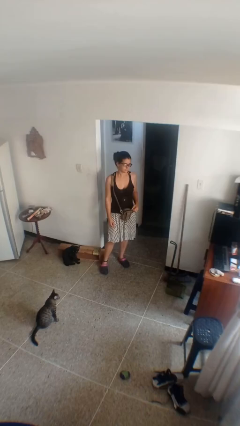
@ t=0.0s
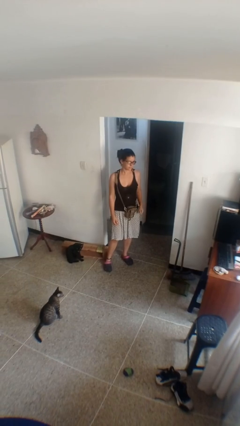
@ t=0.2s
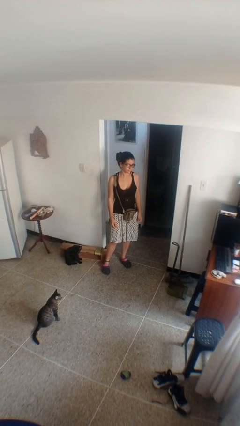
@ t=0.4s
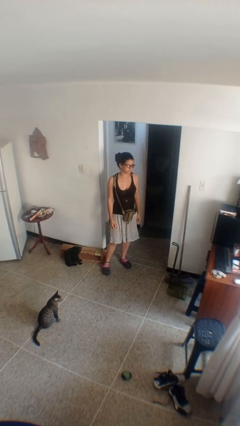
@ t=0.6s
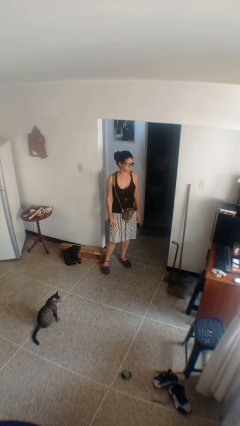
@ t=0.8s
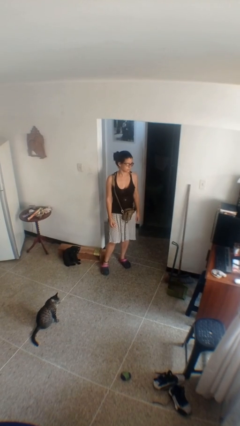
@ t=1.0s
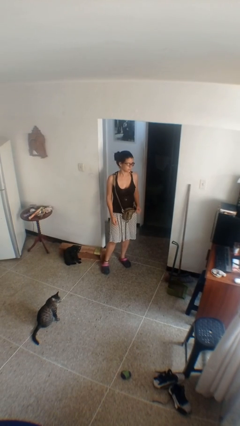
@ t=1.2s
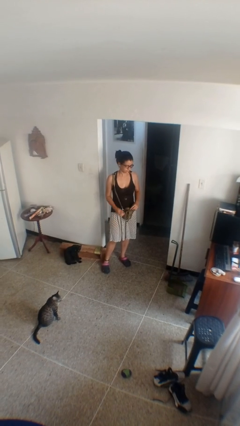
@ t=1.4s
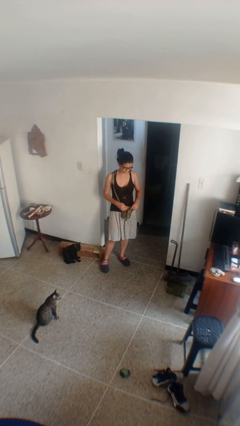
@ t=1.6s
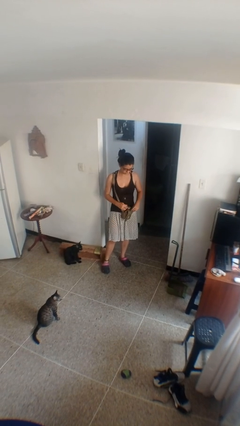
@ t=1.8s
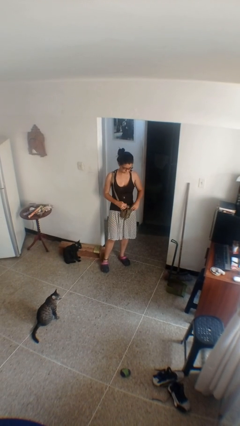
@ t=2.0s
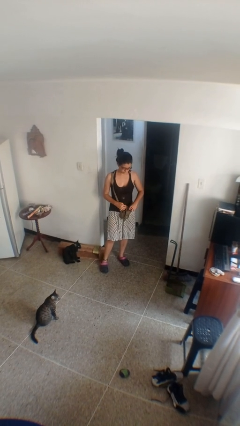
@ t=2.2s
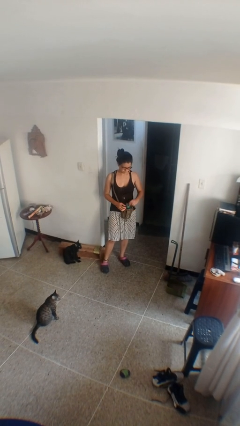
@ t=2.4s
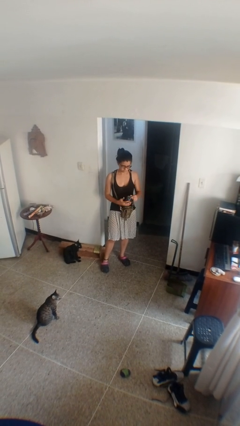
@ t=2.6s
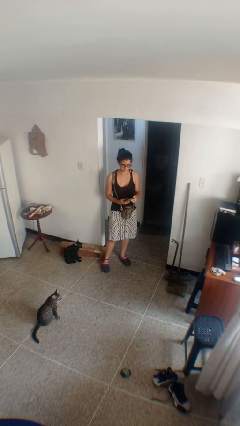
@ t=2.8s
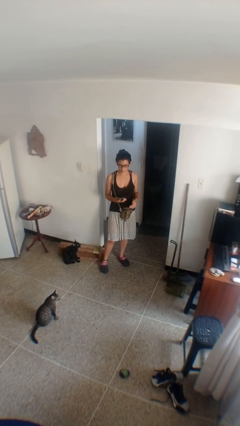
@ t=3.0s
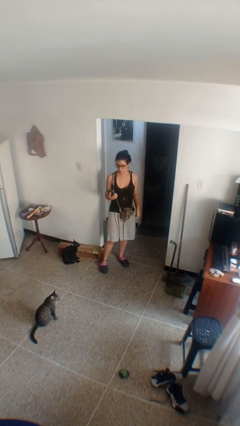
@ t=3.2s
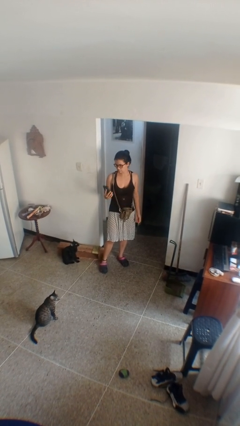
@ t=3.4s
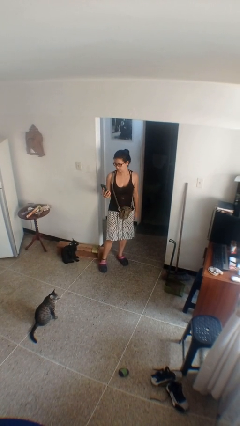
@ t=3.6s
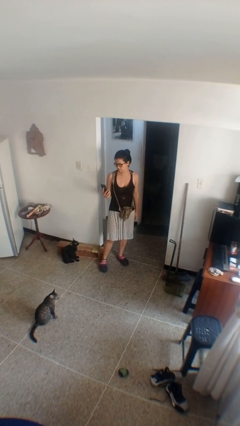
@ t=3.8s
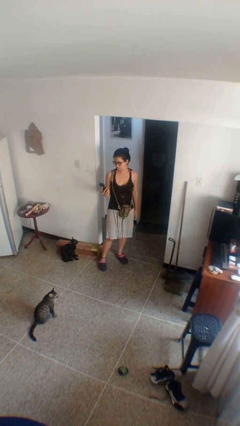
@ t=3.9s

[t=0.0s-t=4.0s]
person takes phone from pocket

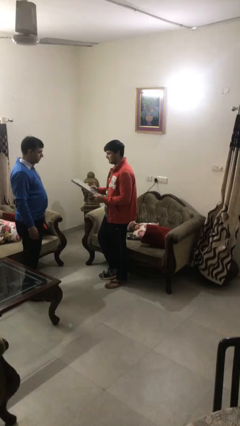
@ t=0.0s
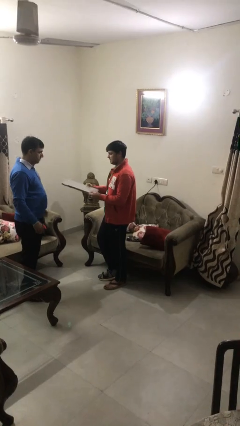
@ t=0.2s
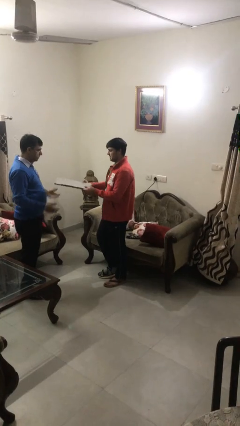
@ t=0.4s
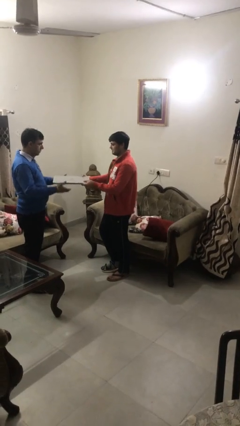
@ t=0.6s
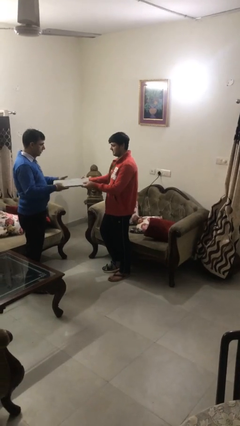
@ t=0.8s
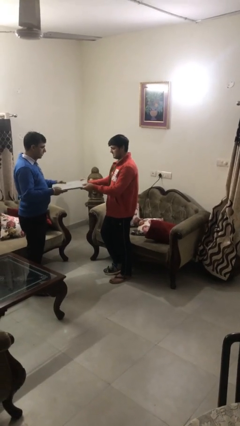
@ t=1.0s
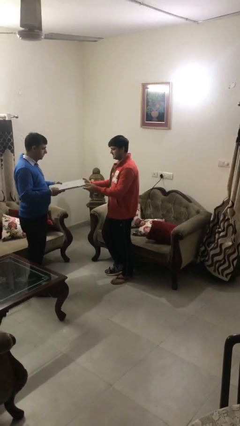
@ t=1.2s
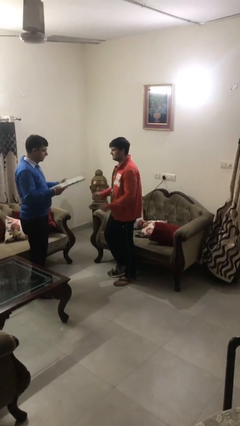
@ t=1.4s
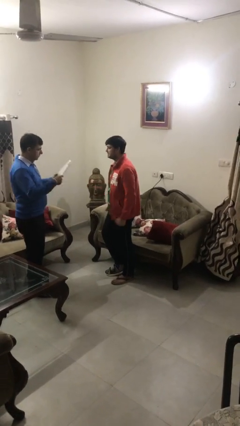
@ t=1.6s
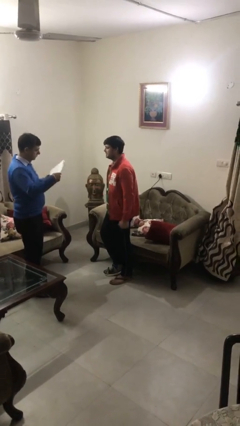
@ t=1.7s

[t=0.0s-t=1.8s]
person transfers object to person

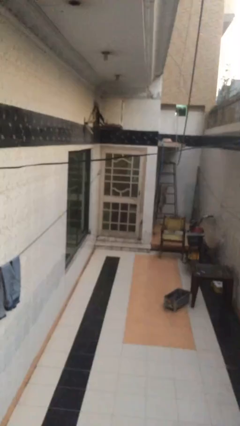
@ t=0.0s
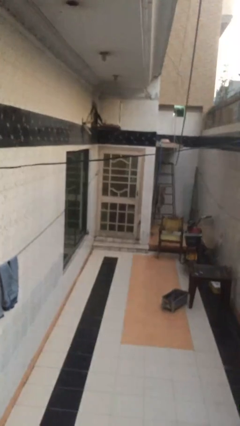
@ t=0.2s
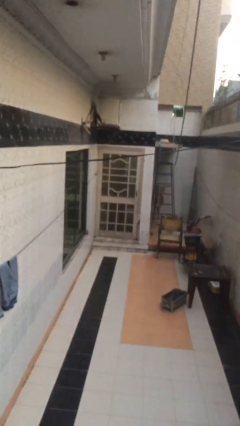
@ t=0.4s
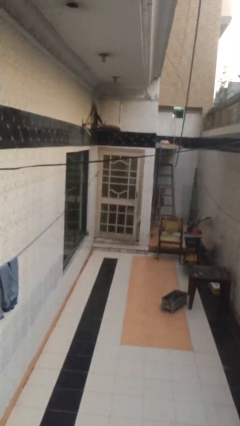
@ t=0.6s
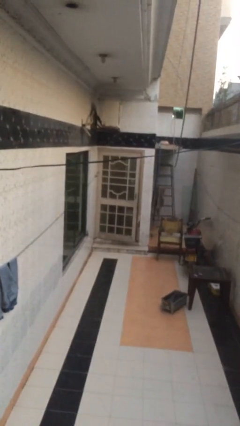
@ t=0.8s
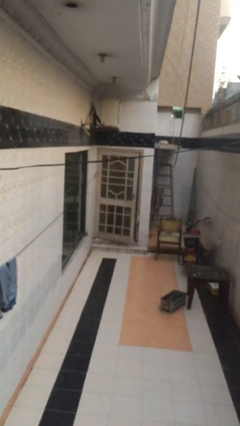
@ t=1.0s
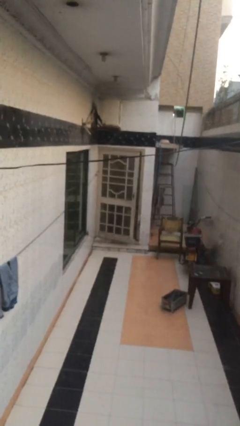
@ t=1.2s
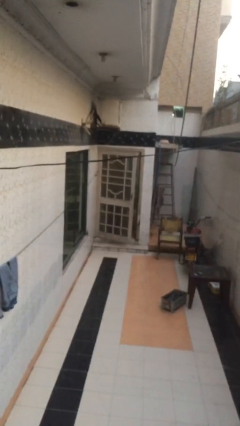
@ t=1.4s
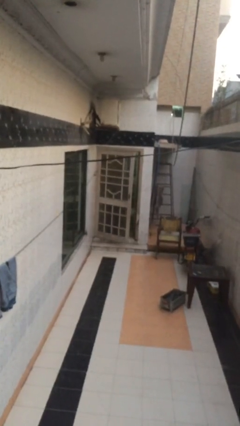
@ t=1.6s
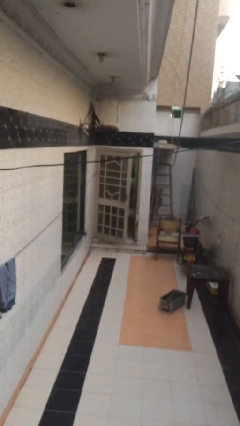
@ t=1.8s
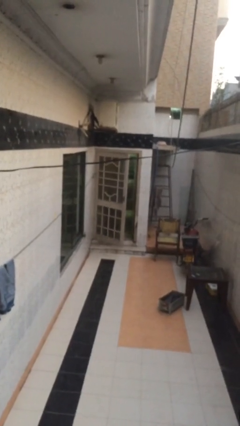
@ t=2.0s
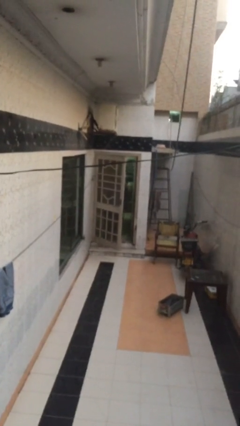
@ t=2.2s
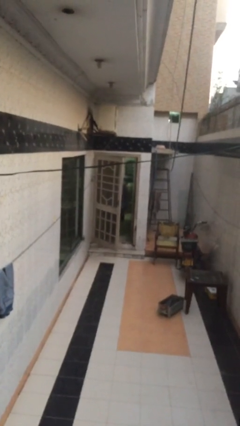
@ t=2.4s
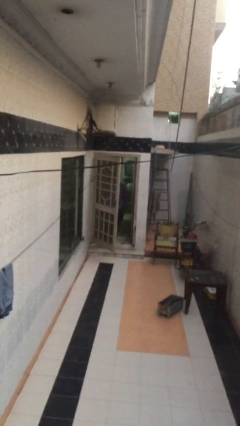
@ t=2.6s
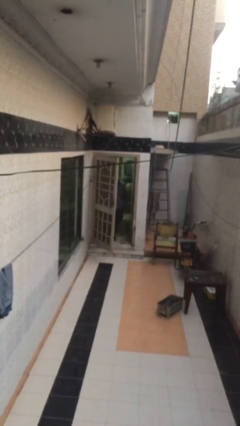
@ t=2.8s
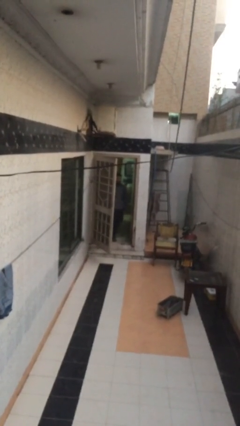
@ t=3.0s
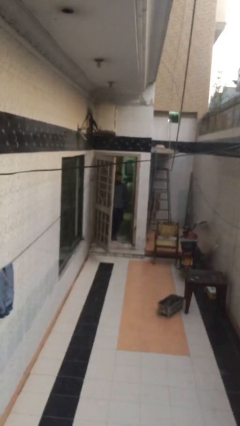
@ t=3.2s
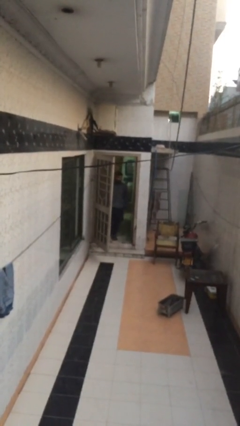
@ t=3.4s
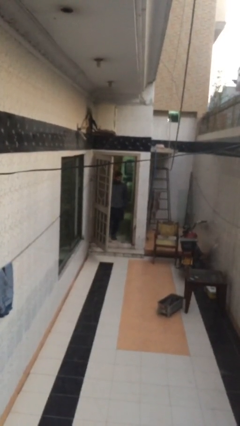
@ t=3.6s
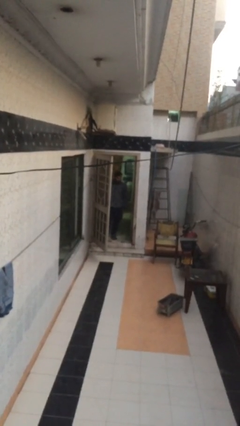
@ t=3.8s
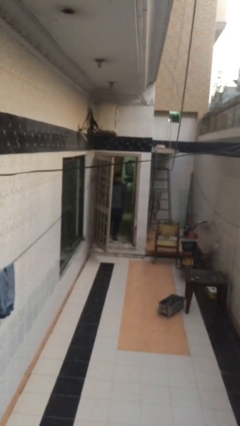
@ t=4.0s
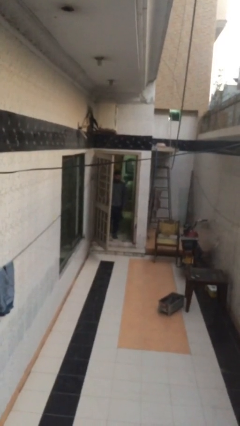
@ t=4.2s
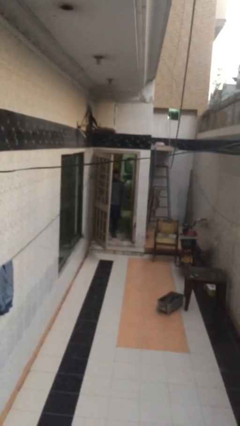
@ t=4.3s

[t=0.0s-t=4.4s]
person opens facility door

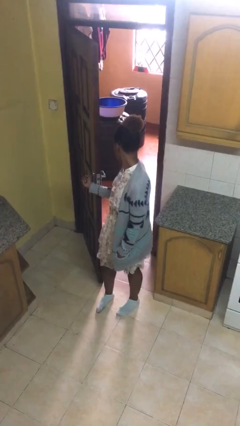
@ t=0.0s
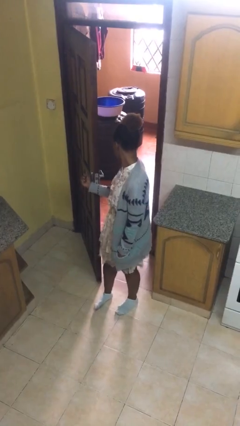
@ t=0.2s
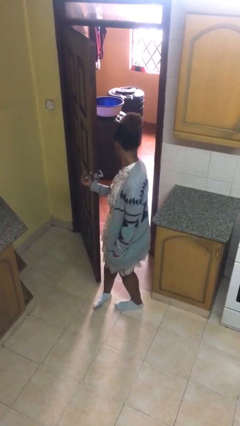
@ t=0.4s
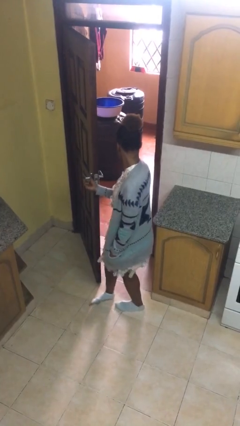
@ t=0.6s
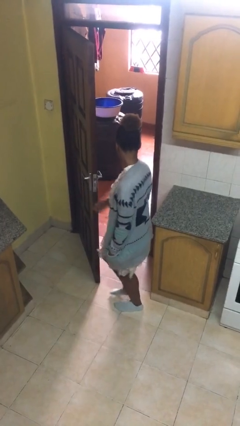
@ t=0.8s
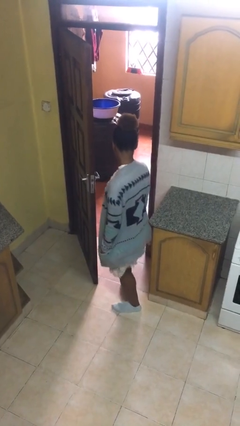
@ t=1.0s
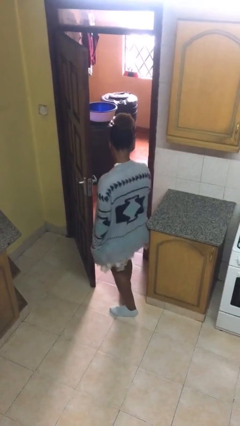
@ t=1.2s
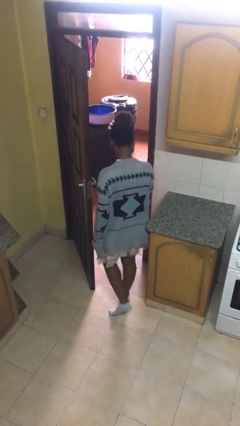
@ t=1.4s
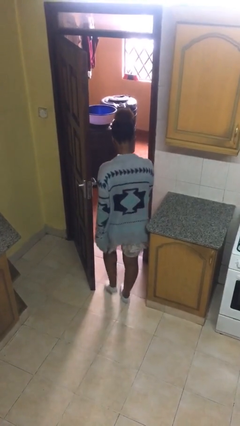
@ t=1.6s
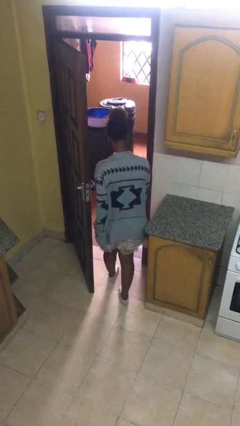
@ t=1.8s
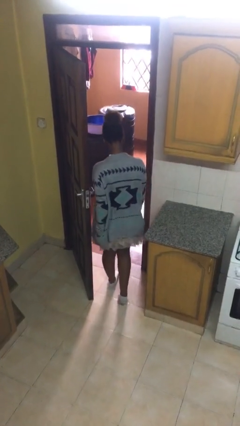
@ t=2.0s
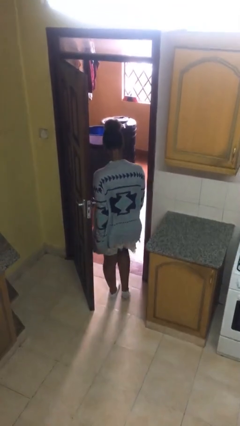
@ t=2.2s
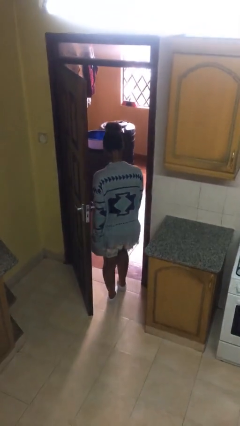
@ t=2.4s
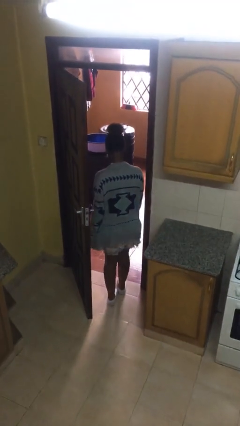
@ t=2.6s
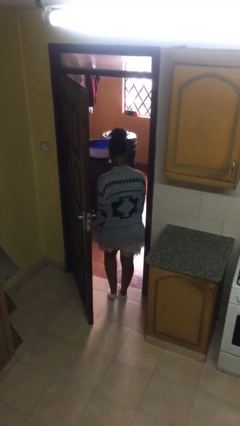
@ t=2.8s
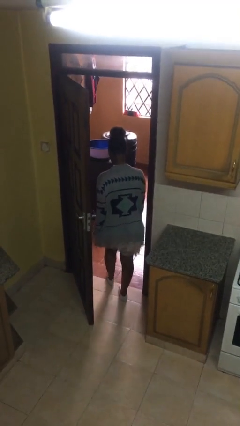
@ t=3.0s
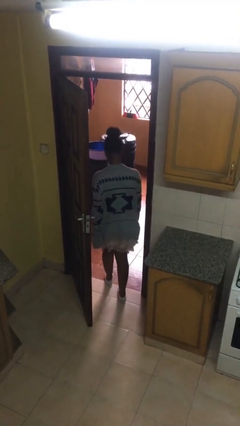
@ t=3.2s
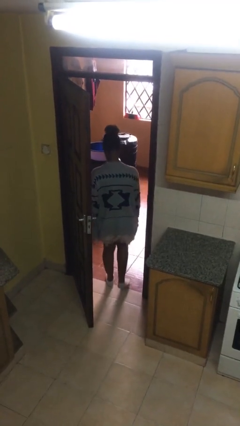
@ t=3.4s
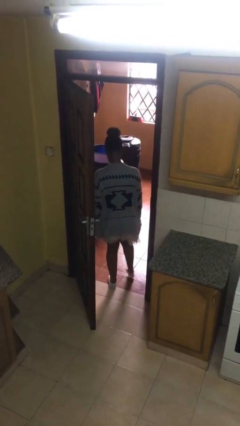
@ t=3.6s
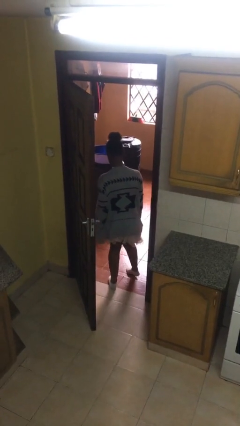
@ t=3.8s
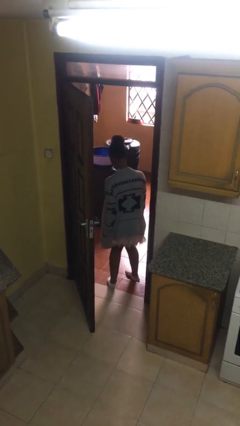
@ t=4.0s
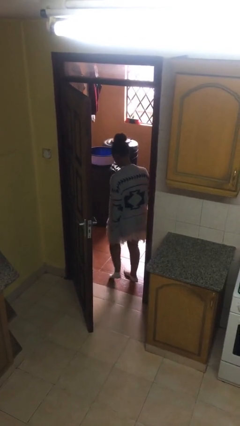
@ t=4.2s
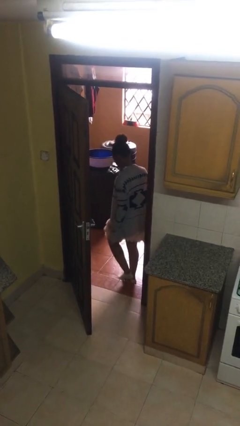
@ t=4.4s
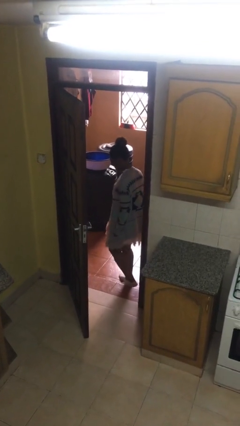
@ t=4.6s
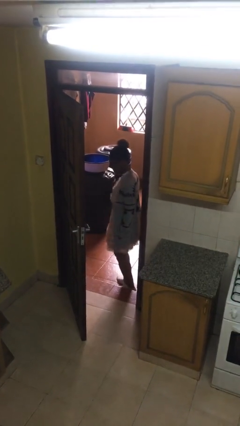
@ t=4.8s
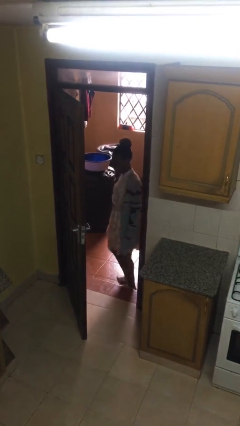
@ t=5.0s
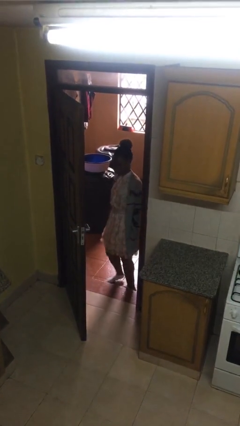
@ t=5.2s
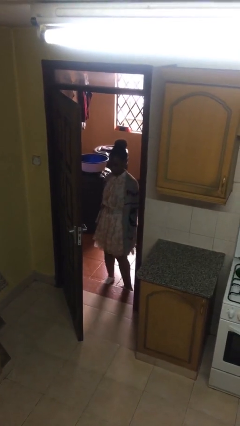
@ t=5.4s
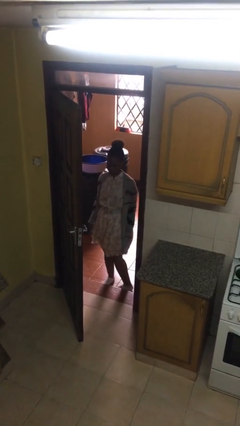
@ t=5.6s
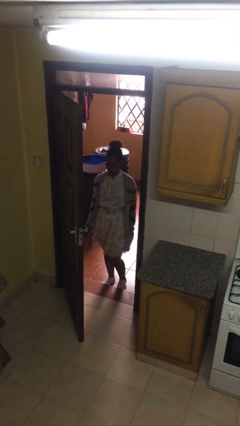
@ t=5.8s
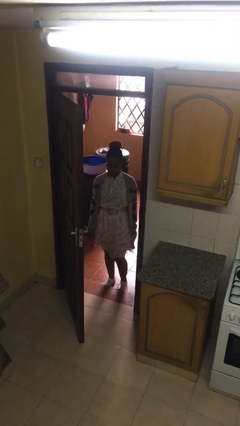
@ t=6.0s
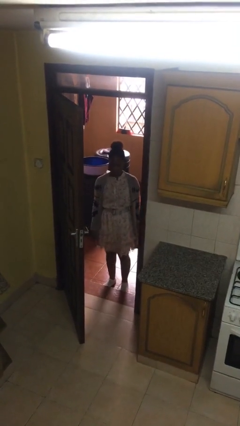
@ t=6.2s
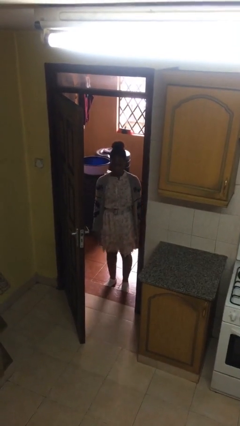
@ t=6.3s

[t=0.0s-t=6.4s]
person exits scene through structure

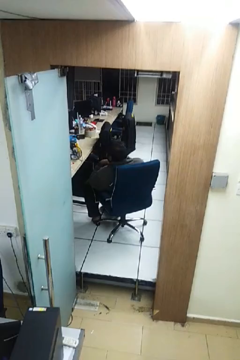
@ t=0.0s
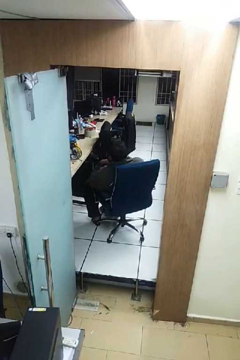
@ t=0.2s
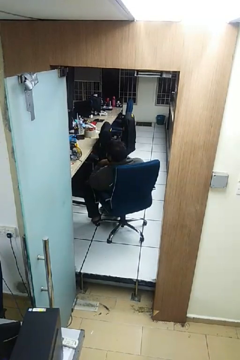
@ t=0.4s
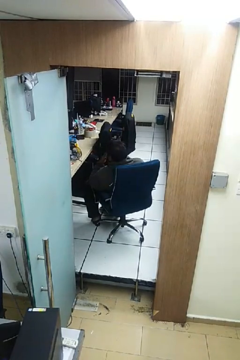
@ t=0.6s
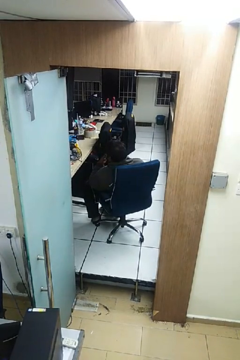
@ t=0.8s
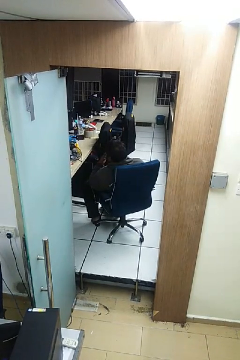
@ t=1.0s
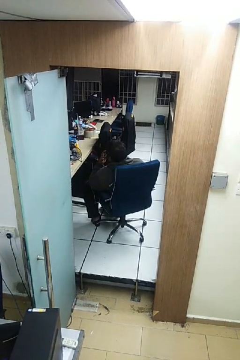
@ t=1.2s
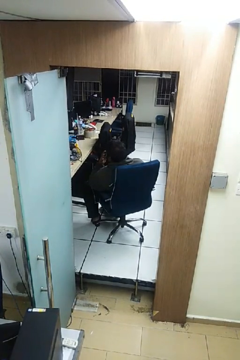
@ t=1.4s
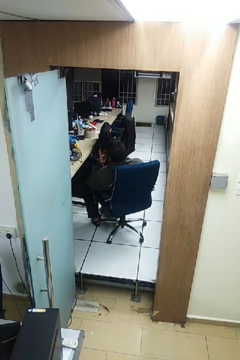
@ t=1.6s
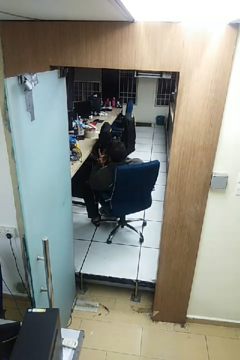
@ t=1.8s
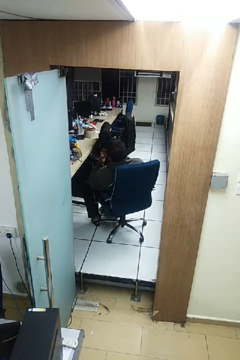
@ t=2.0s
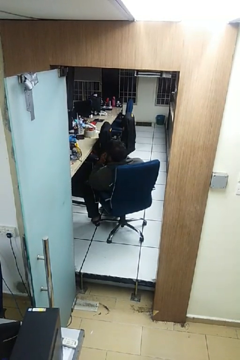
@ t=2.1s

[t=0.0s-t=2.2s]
person licks fingers
